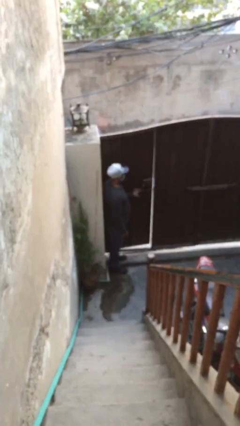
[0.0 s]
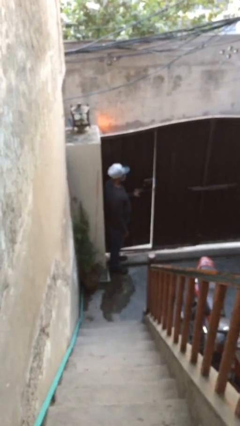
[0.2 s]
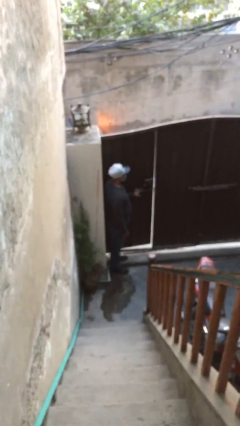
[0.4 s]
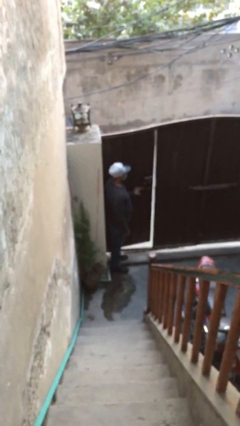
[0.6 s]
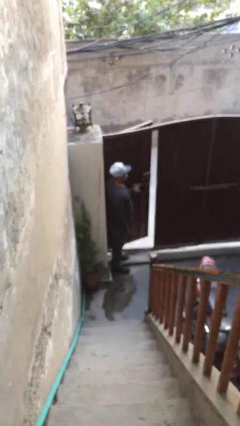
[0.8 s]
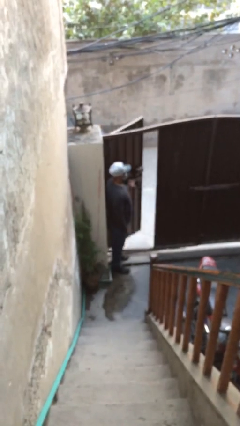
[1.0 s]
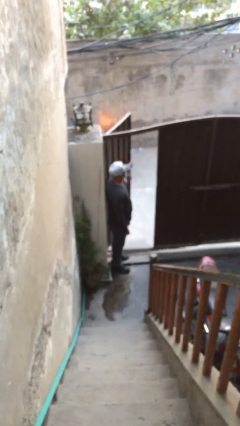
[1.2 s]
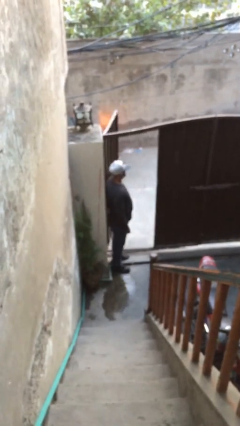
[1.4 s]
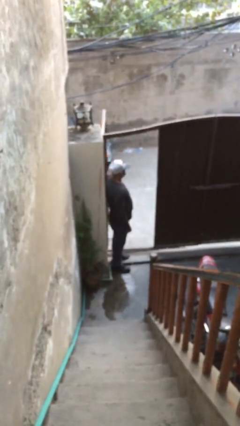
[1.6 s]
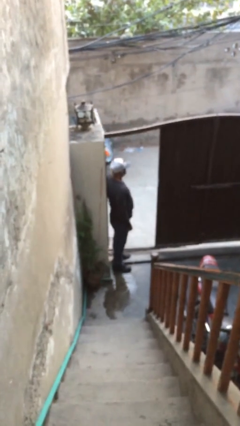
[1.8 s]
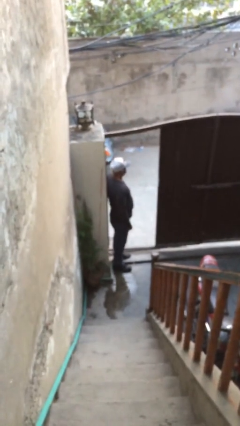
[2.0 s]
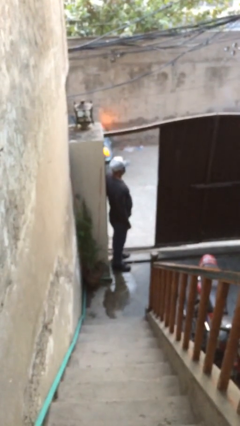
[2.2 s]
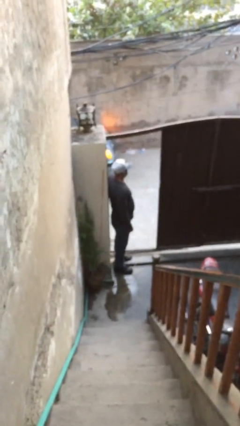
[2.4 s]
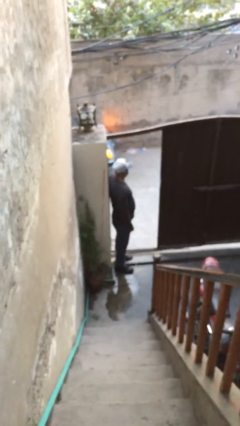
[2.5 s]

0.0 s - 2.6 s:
person opens facility door

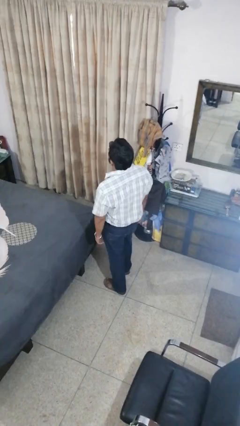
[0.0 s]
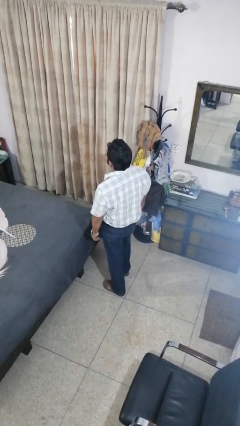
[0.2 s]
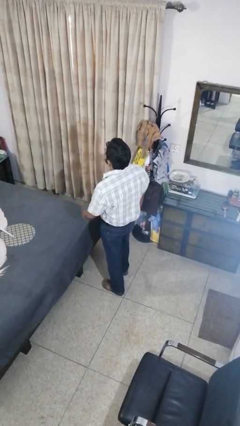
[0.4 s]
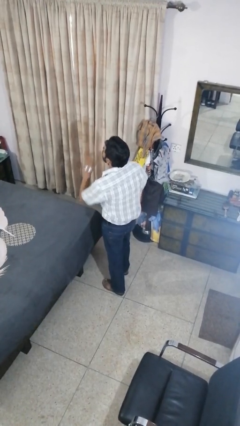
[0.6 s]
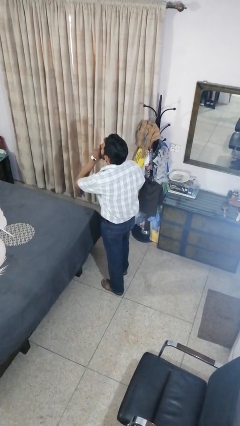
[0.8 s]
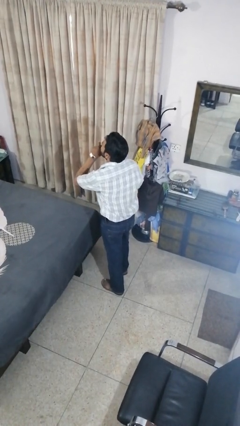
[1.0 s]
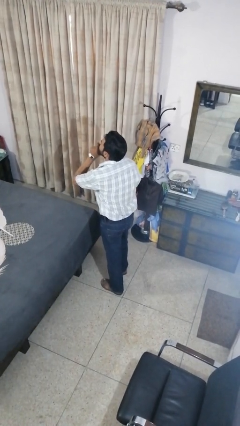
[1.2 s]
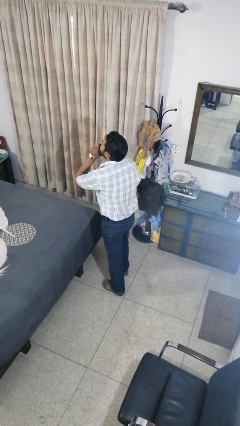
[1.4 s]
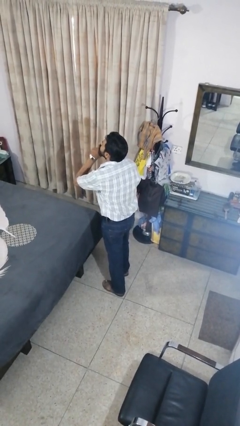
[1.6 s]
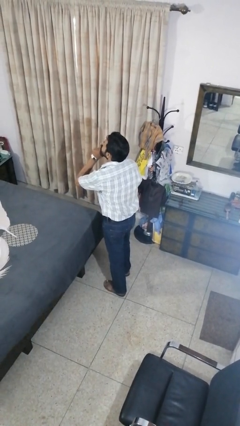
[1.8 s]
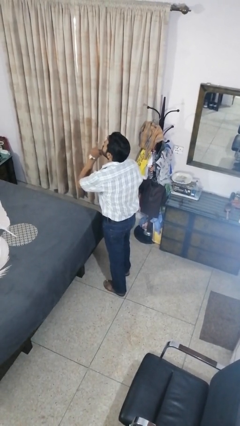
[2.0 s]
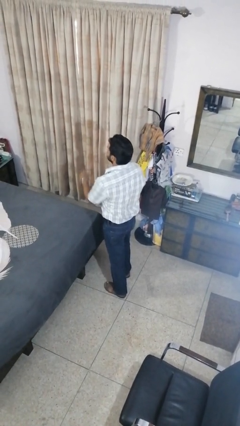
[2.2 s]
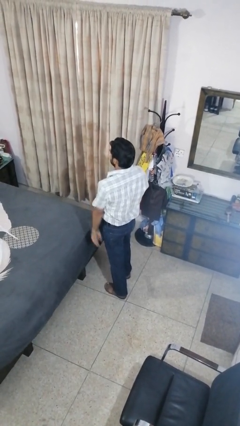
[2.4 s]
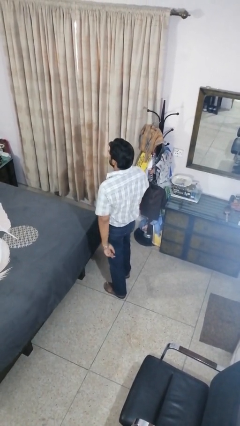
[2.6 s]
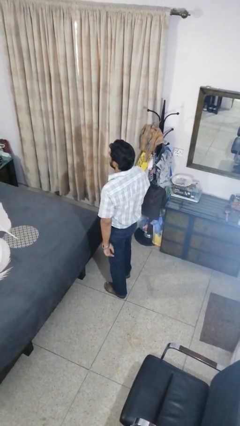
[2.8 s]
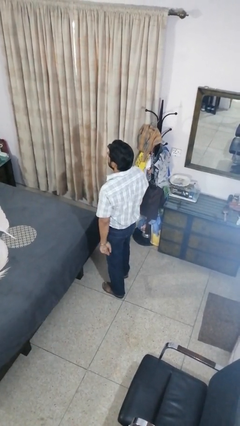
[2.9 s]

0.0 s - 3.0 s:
person gestures be quiet

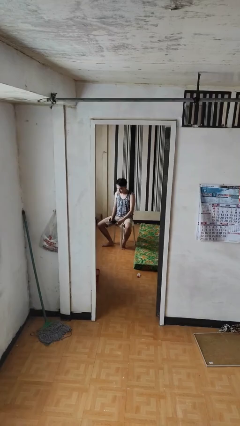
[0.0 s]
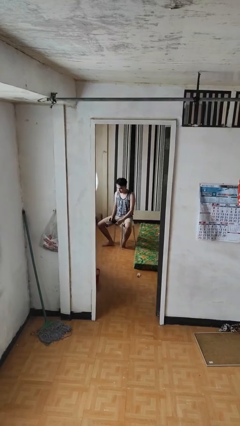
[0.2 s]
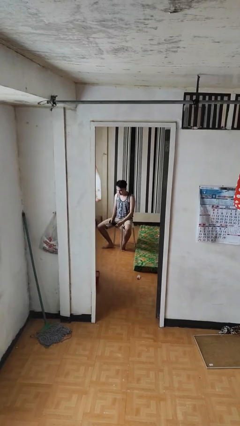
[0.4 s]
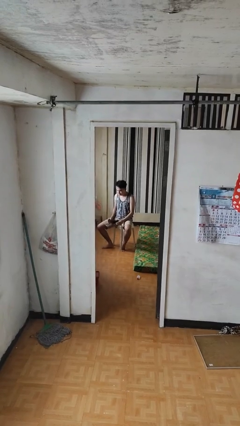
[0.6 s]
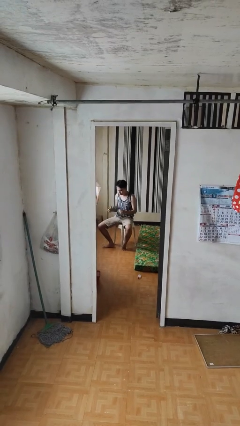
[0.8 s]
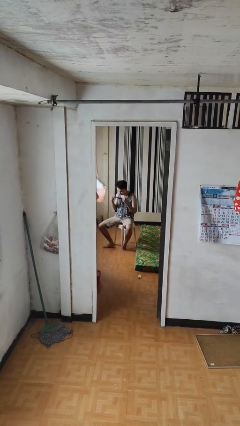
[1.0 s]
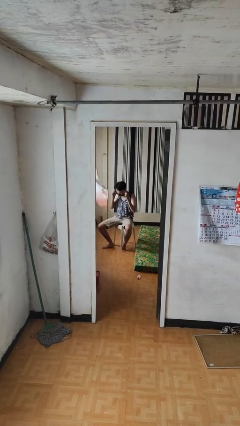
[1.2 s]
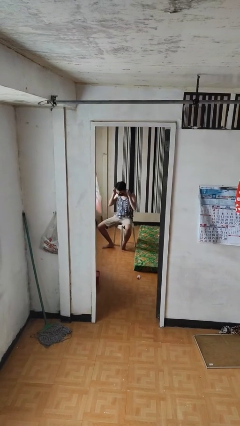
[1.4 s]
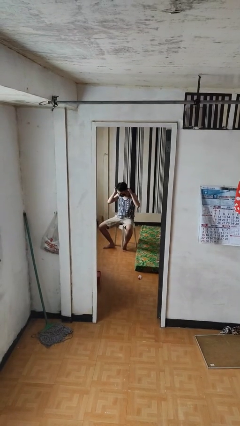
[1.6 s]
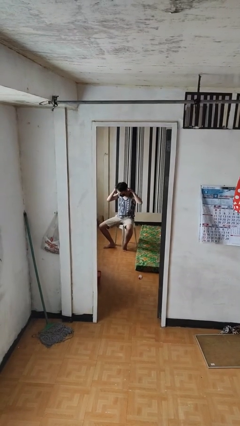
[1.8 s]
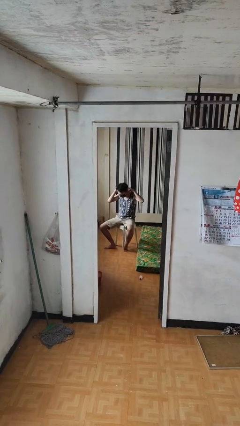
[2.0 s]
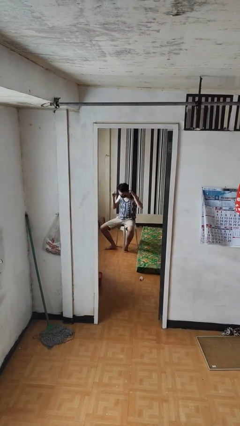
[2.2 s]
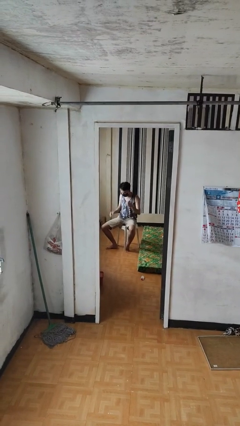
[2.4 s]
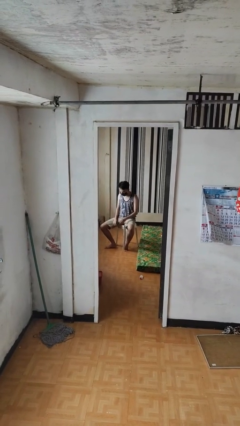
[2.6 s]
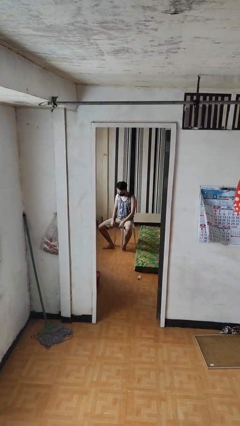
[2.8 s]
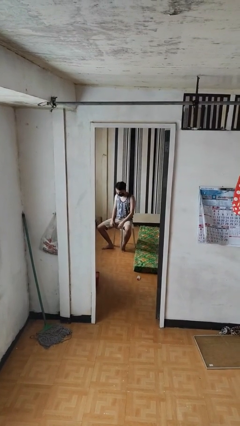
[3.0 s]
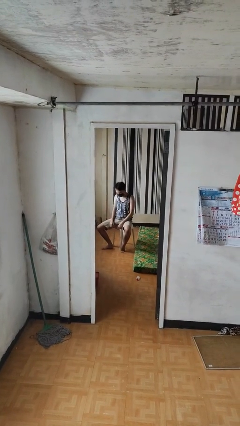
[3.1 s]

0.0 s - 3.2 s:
person puts on facemask

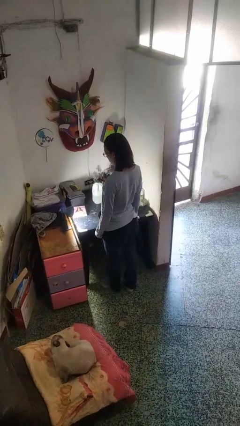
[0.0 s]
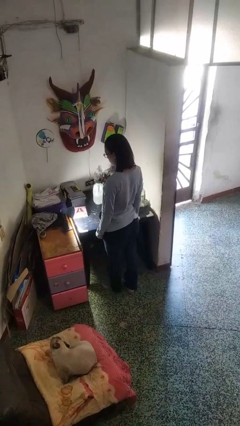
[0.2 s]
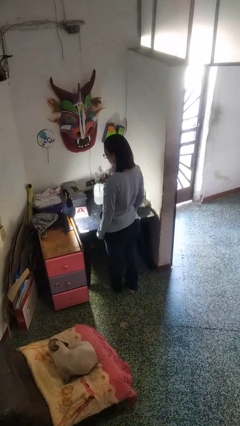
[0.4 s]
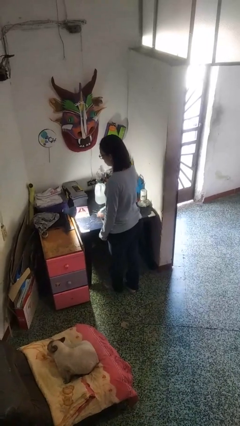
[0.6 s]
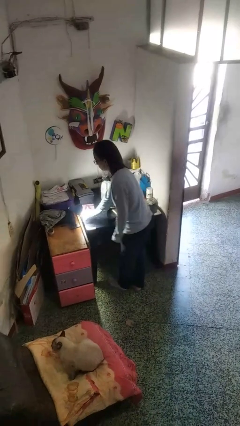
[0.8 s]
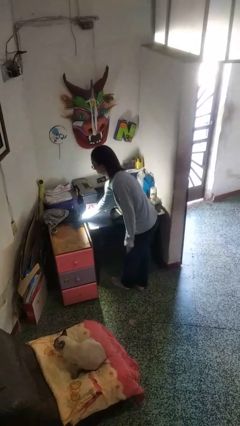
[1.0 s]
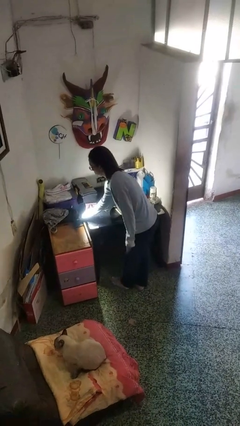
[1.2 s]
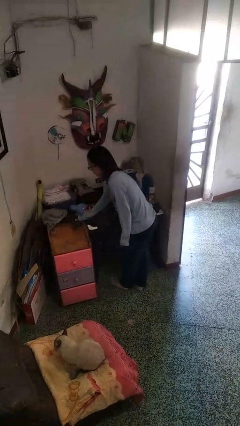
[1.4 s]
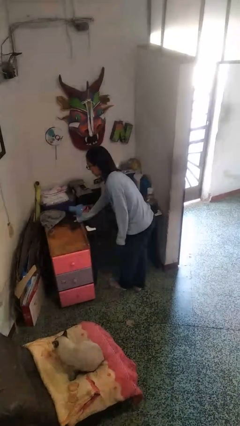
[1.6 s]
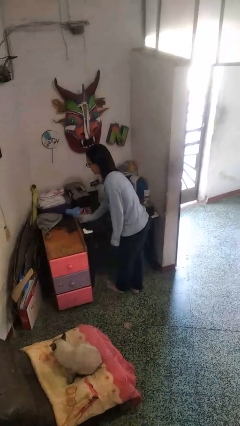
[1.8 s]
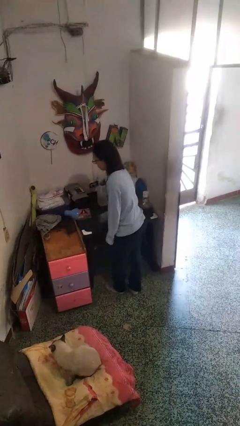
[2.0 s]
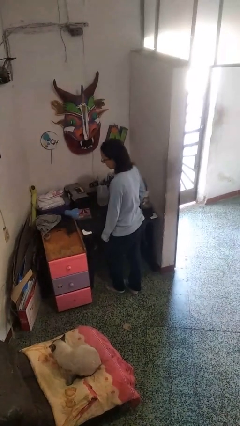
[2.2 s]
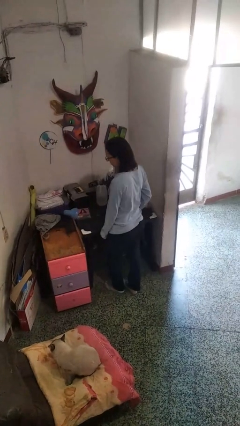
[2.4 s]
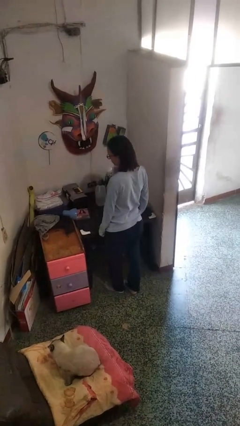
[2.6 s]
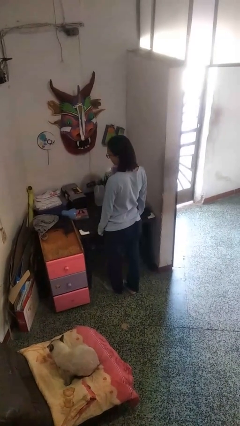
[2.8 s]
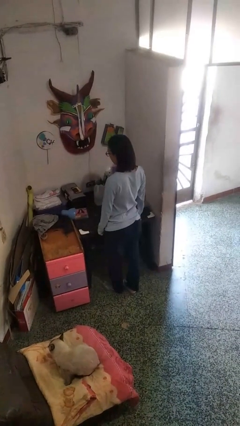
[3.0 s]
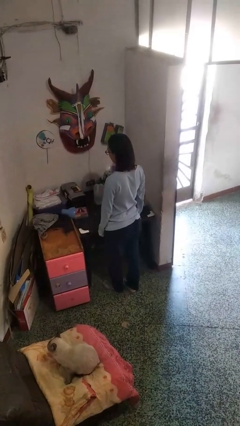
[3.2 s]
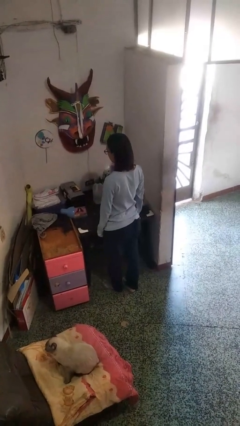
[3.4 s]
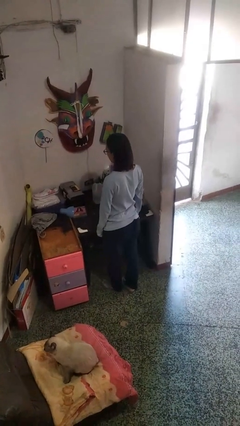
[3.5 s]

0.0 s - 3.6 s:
person turns off lamp

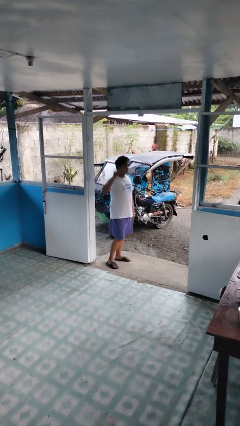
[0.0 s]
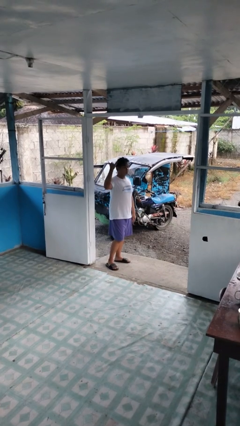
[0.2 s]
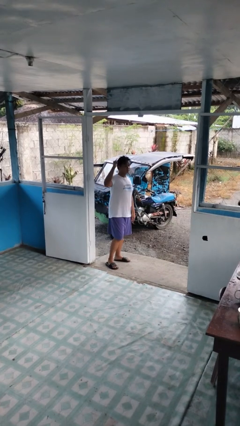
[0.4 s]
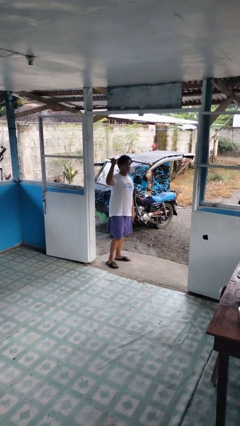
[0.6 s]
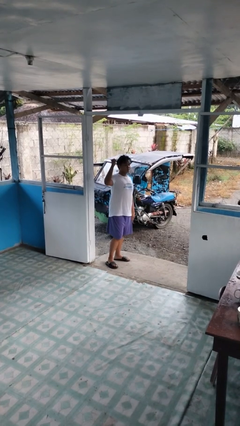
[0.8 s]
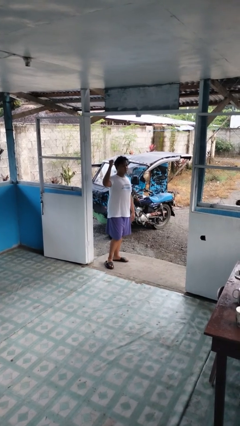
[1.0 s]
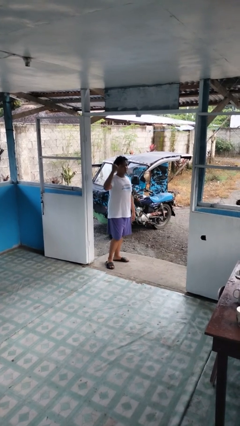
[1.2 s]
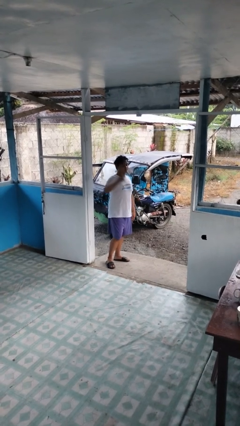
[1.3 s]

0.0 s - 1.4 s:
person gestures hang loose

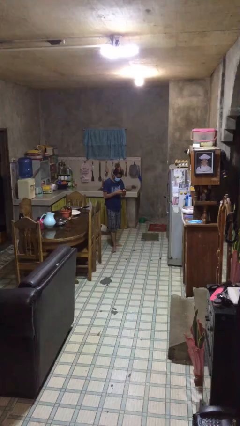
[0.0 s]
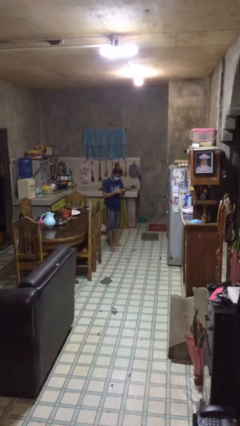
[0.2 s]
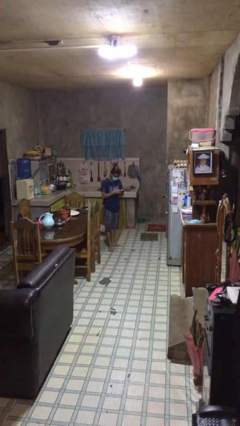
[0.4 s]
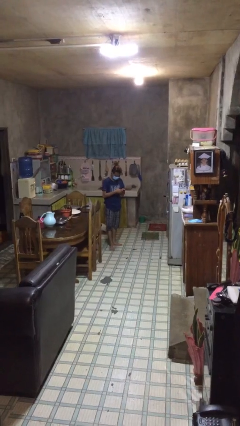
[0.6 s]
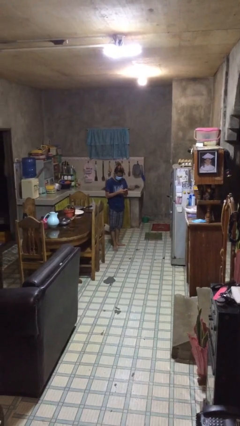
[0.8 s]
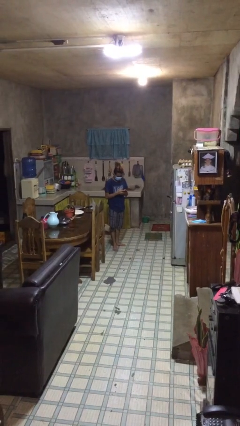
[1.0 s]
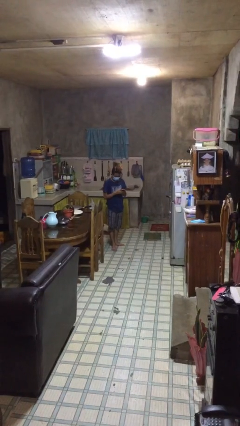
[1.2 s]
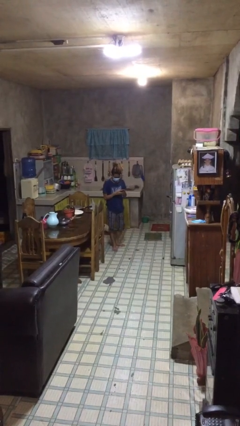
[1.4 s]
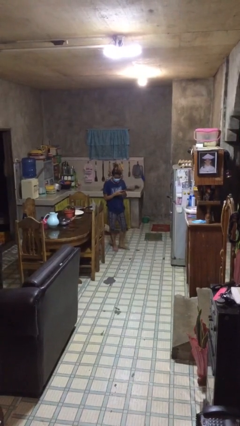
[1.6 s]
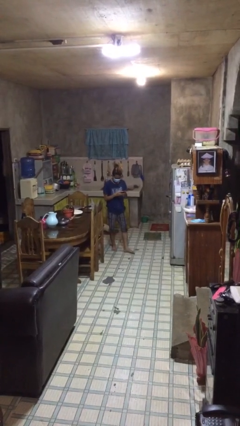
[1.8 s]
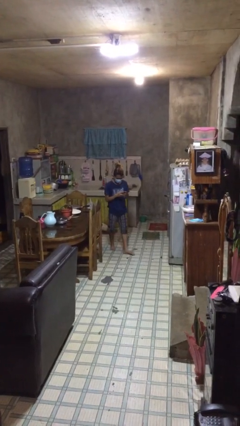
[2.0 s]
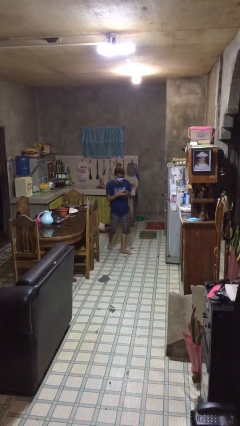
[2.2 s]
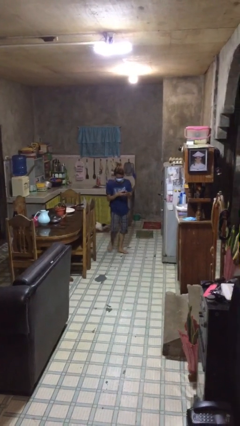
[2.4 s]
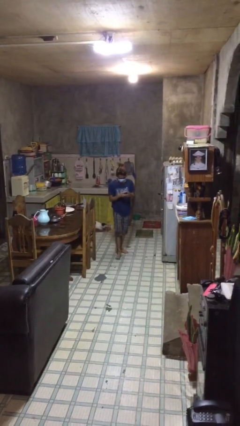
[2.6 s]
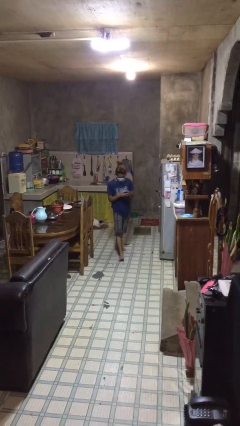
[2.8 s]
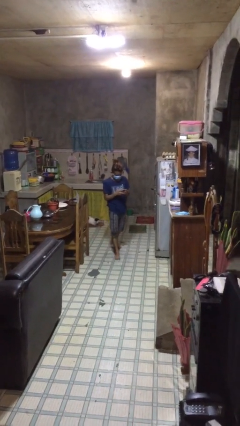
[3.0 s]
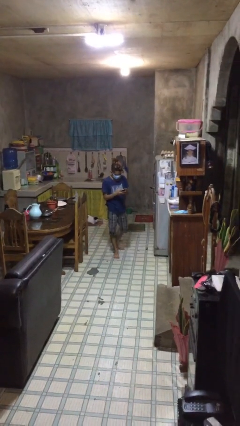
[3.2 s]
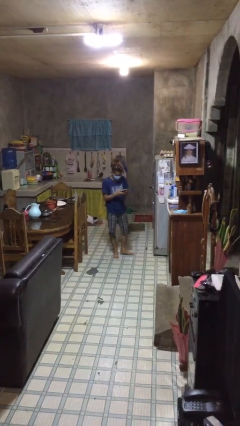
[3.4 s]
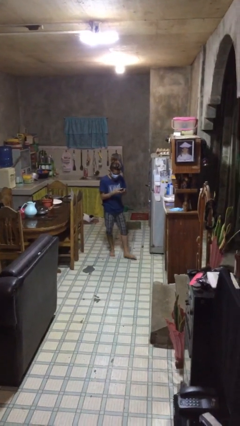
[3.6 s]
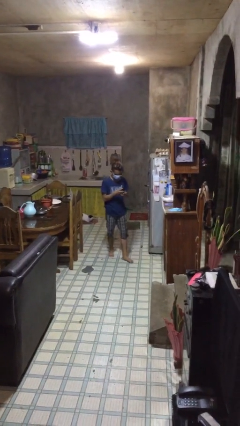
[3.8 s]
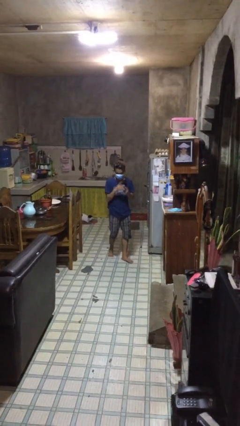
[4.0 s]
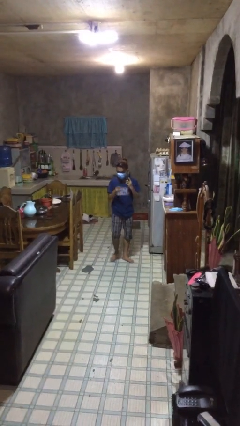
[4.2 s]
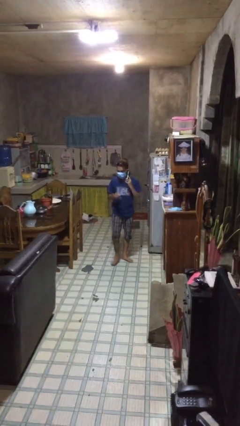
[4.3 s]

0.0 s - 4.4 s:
person texts on phone
